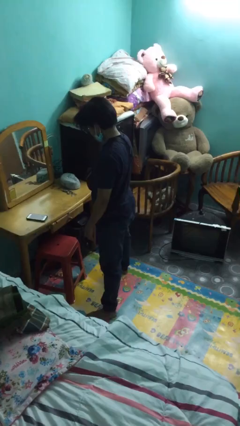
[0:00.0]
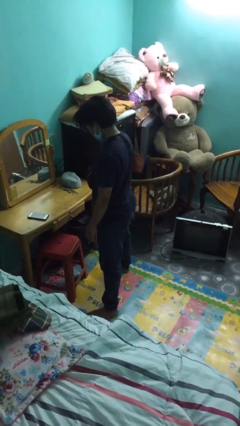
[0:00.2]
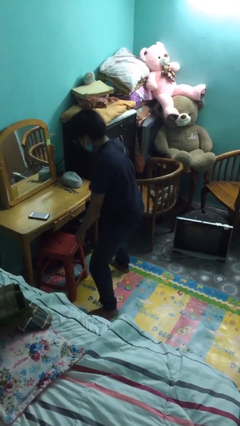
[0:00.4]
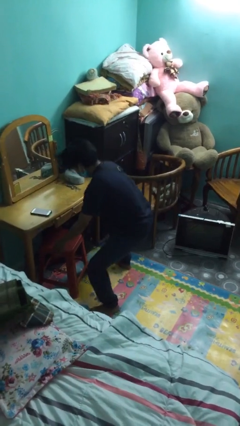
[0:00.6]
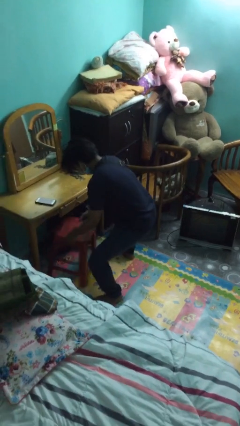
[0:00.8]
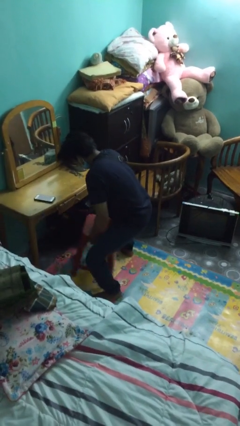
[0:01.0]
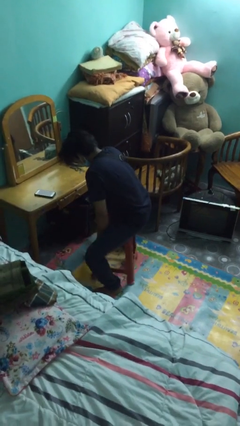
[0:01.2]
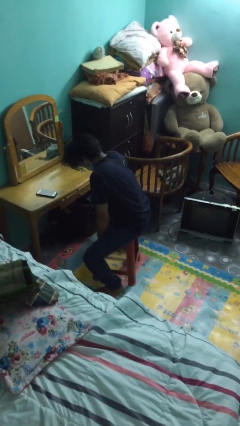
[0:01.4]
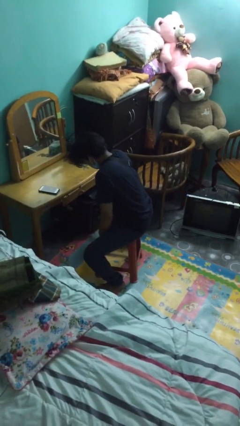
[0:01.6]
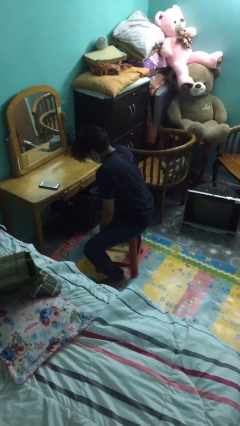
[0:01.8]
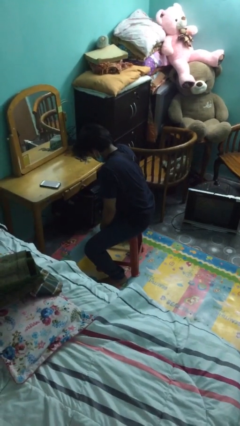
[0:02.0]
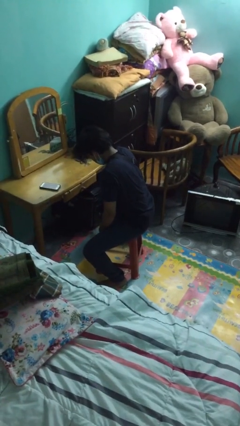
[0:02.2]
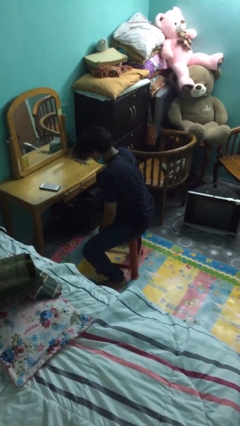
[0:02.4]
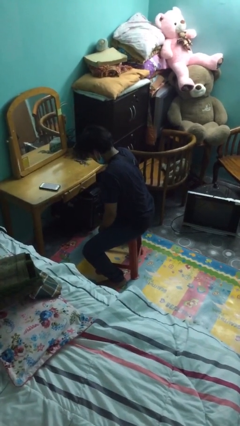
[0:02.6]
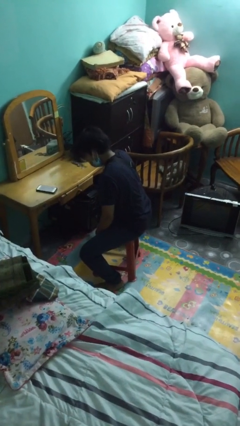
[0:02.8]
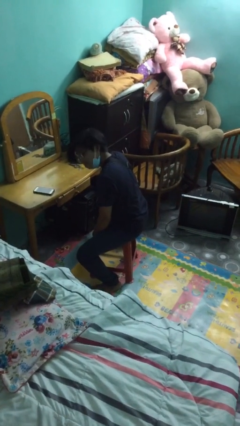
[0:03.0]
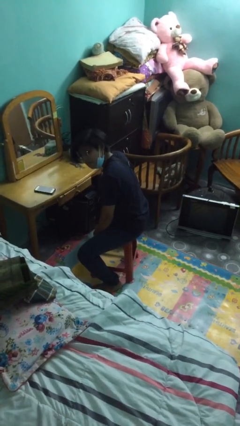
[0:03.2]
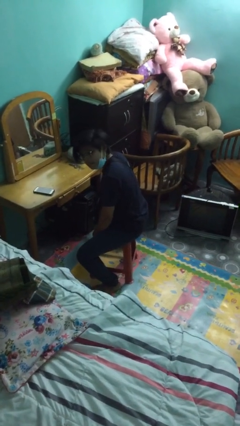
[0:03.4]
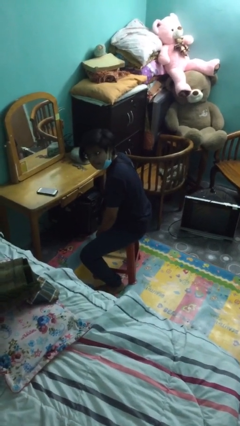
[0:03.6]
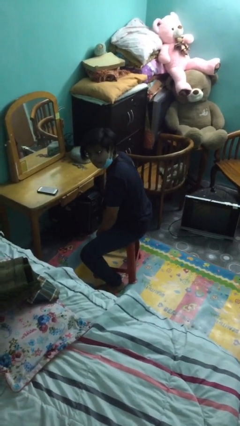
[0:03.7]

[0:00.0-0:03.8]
person sits down

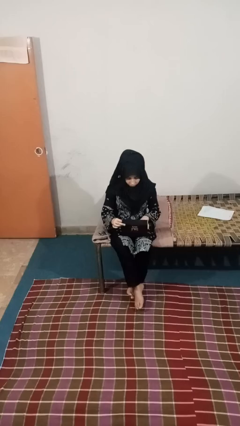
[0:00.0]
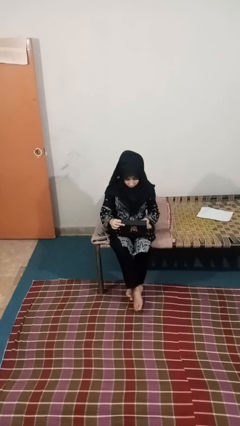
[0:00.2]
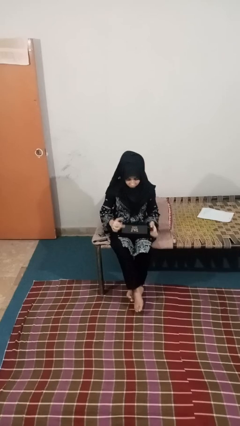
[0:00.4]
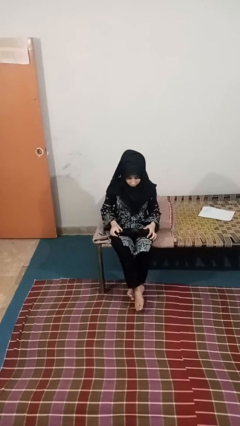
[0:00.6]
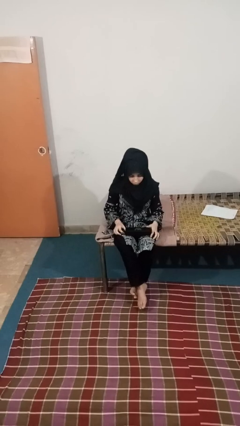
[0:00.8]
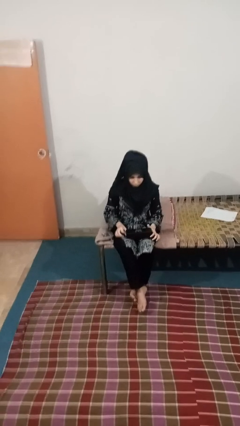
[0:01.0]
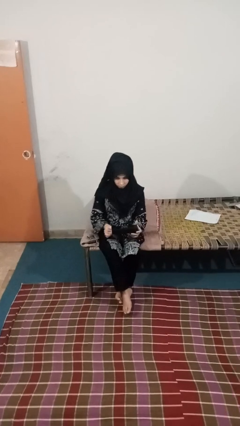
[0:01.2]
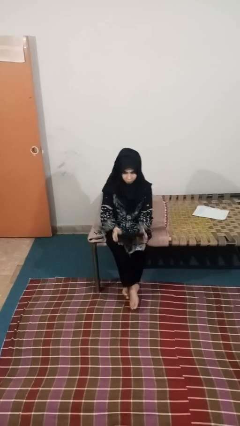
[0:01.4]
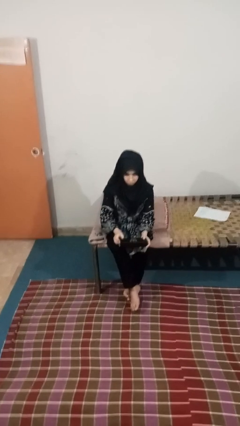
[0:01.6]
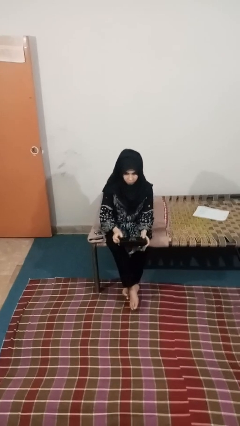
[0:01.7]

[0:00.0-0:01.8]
person closes jewelry box

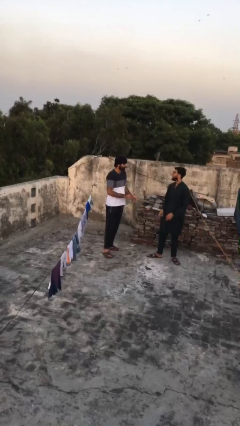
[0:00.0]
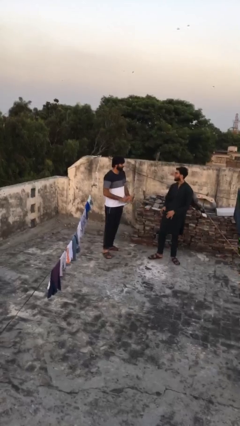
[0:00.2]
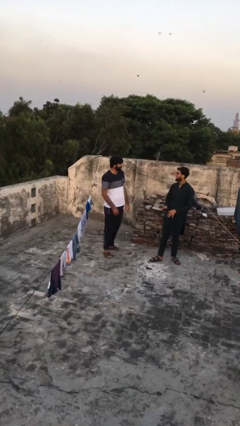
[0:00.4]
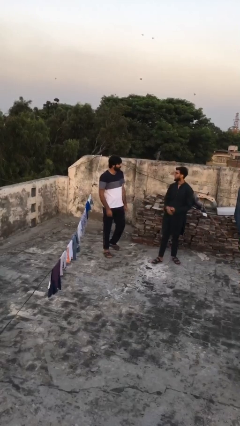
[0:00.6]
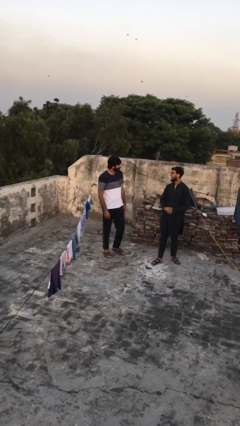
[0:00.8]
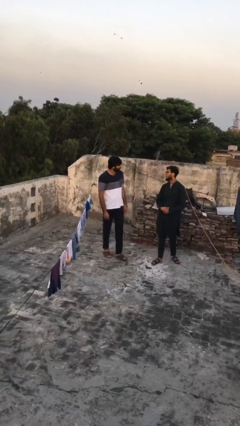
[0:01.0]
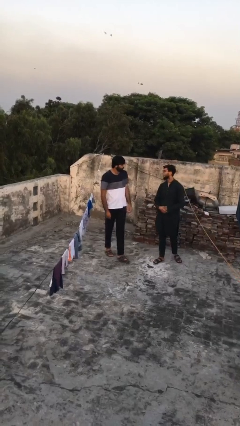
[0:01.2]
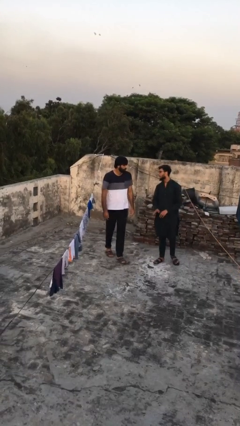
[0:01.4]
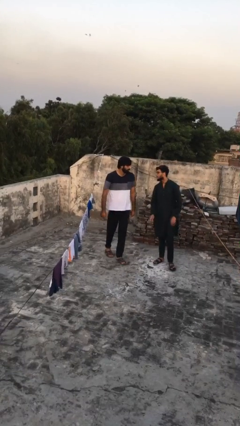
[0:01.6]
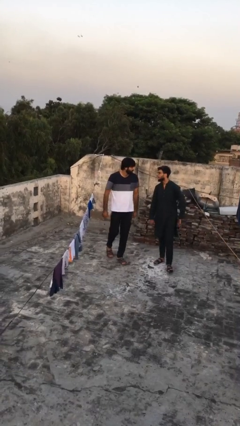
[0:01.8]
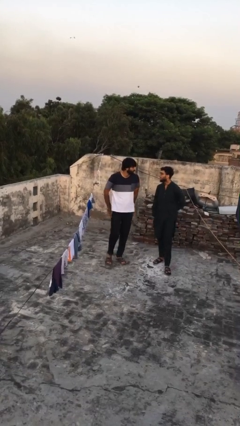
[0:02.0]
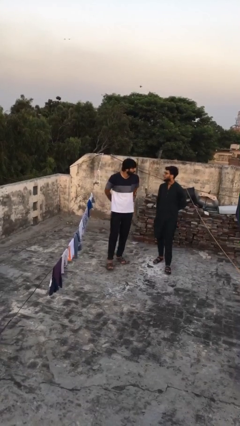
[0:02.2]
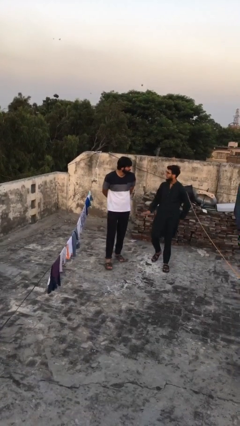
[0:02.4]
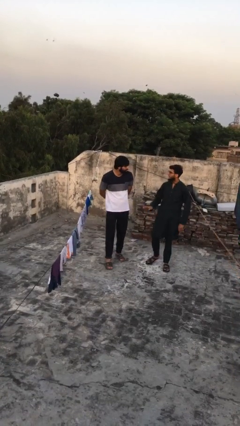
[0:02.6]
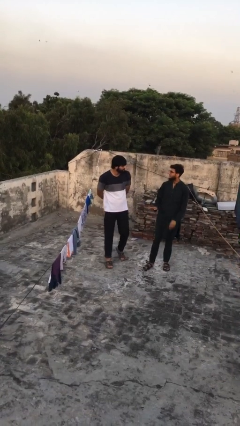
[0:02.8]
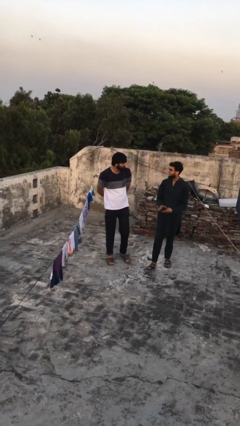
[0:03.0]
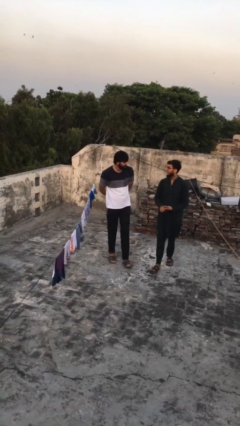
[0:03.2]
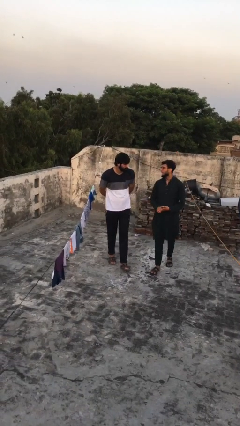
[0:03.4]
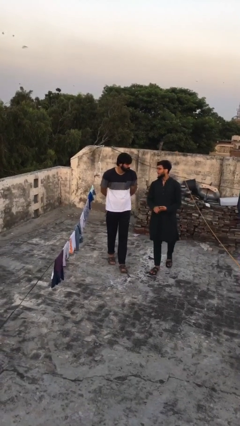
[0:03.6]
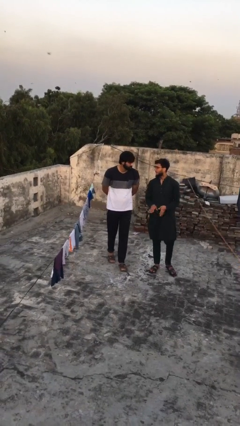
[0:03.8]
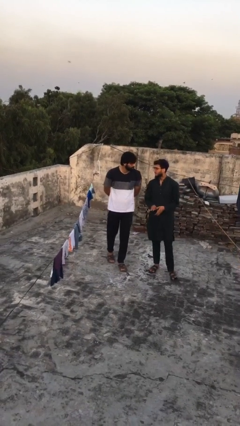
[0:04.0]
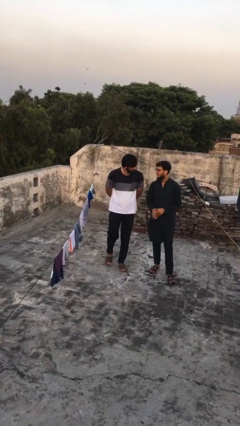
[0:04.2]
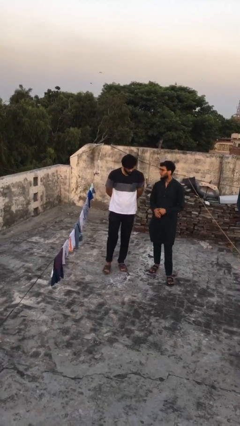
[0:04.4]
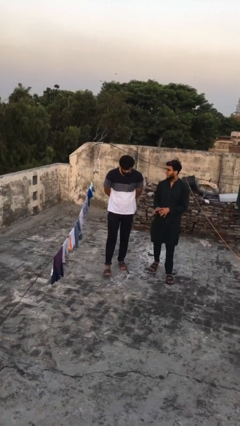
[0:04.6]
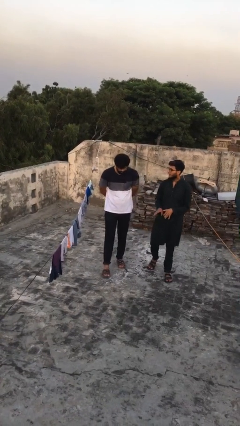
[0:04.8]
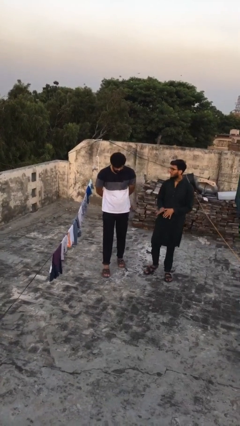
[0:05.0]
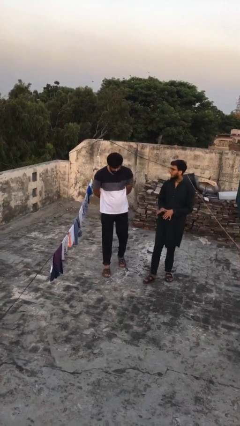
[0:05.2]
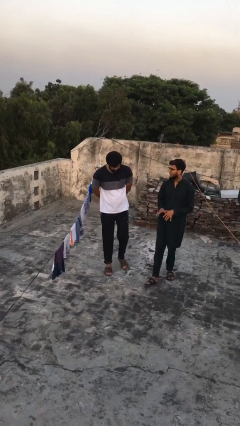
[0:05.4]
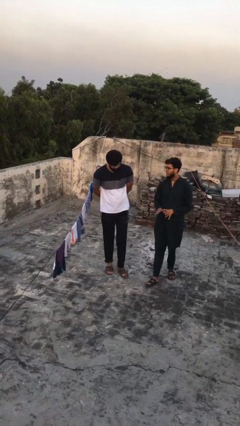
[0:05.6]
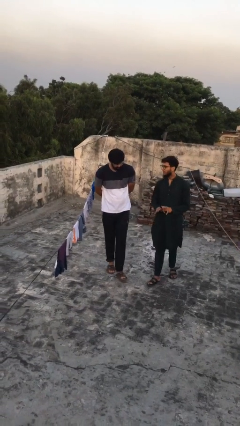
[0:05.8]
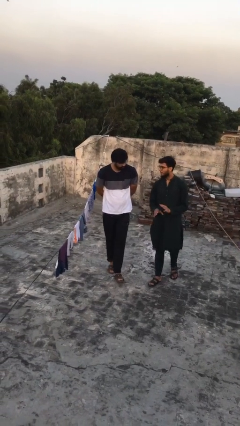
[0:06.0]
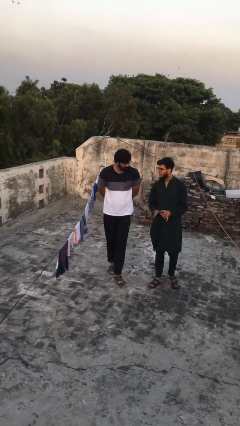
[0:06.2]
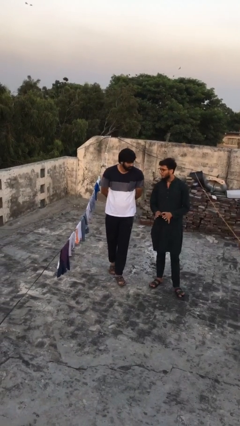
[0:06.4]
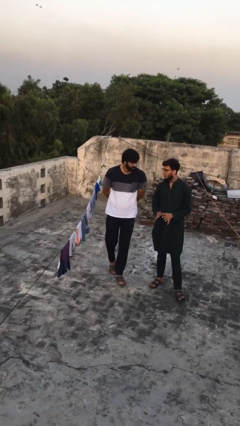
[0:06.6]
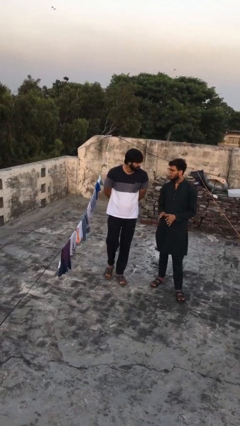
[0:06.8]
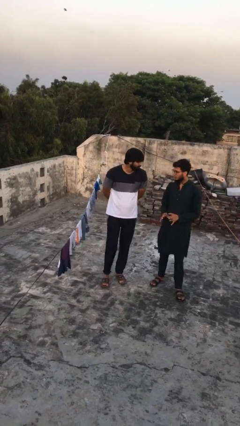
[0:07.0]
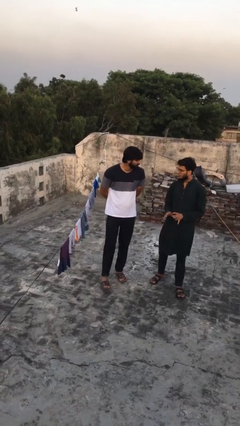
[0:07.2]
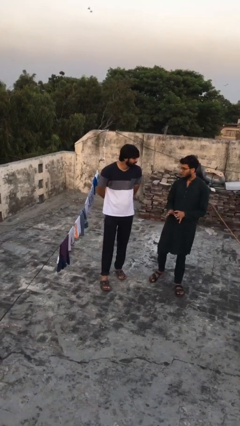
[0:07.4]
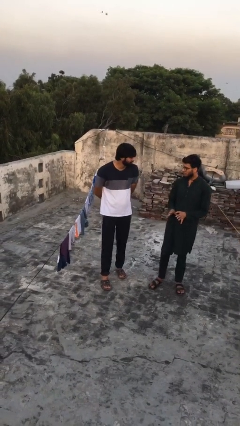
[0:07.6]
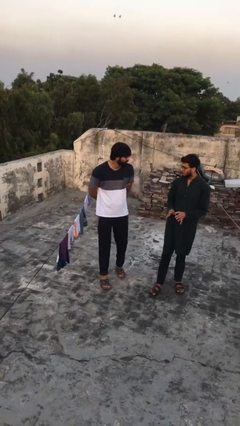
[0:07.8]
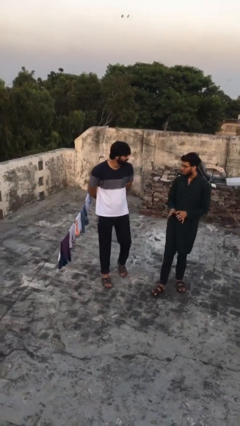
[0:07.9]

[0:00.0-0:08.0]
person talks to person

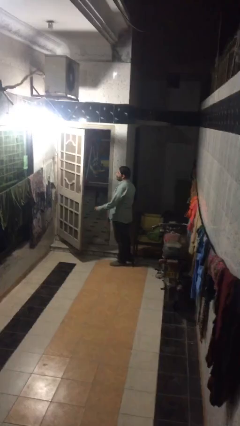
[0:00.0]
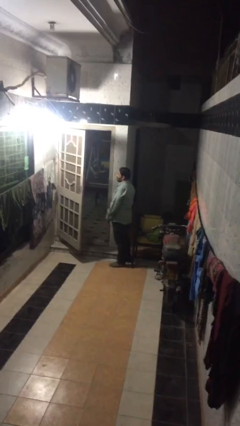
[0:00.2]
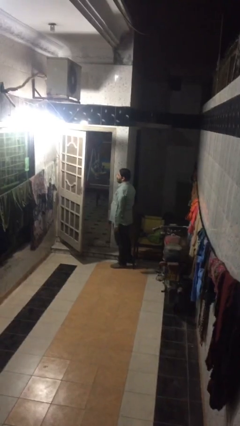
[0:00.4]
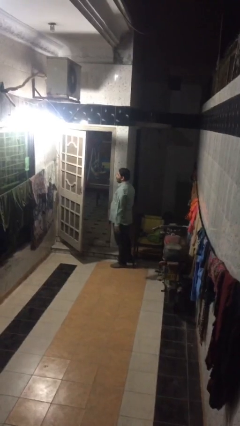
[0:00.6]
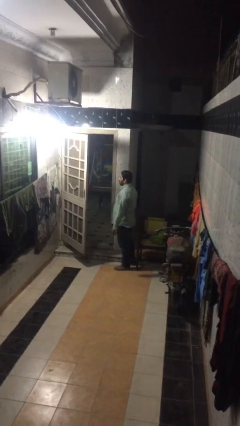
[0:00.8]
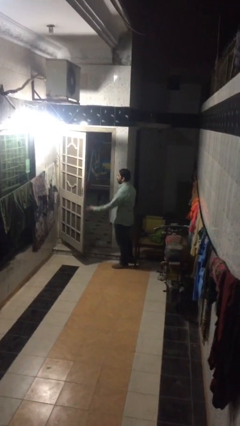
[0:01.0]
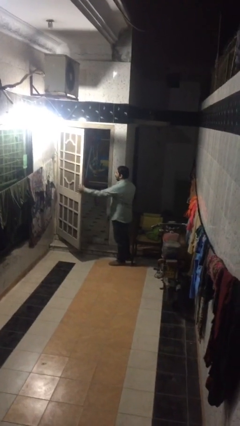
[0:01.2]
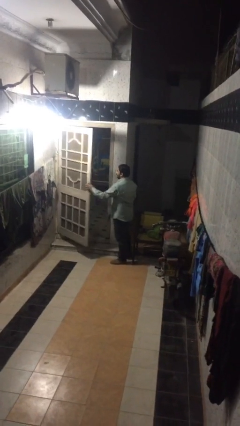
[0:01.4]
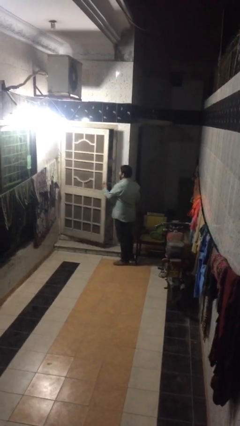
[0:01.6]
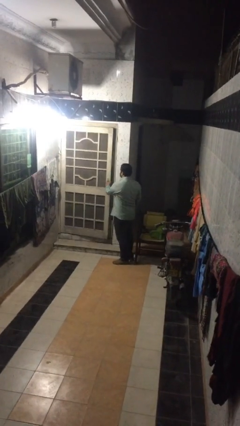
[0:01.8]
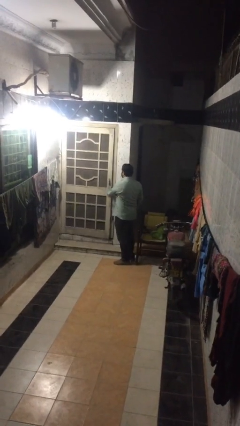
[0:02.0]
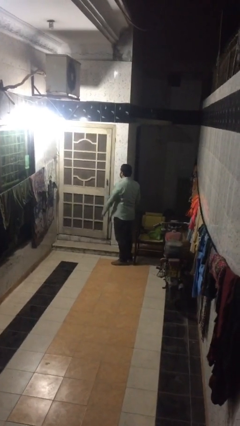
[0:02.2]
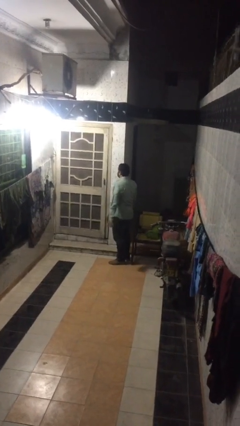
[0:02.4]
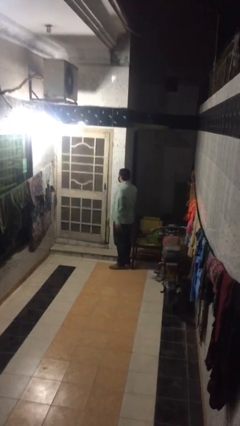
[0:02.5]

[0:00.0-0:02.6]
person closes facility door

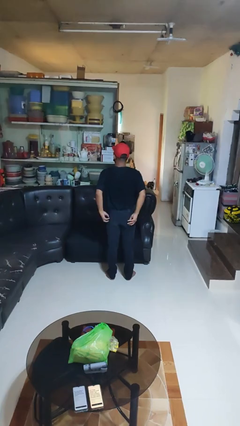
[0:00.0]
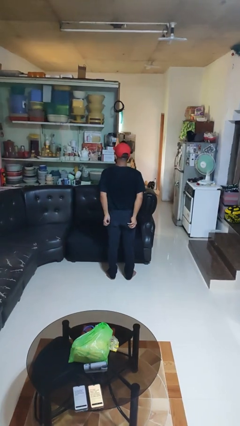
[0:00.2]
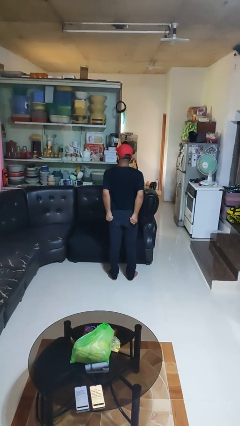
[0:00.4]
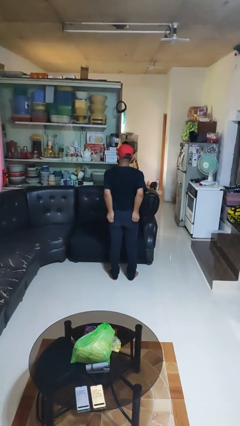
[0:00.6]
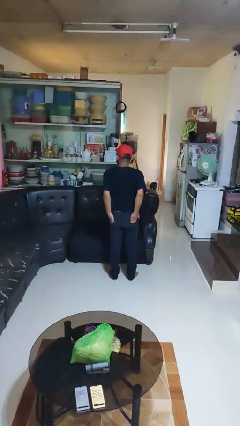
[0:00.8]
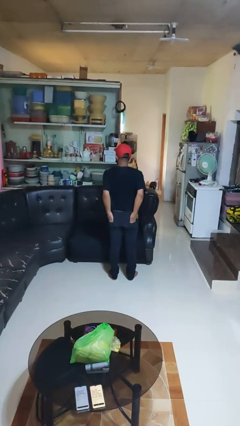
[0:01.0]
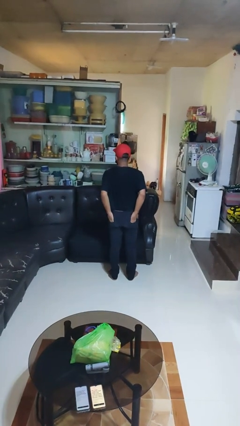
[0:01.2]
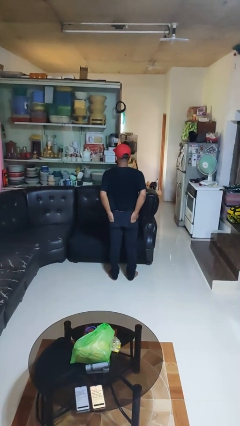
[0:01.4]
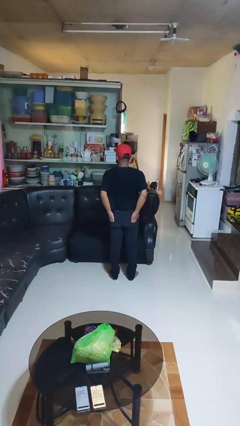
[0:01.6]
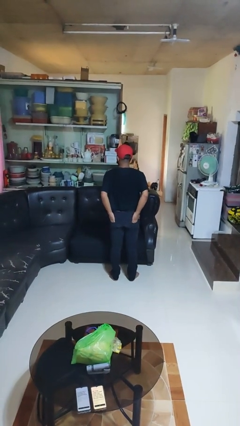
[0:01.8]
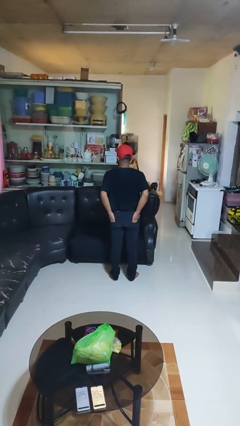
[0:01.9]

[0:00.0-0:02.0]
person puts hands in back pockets
